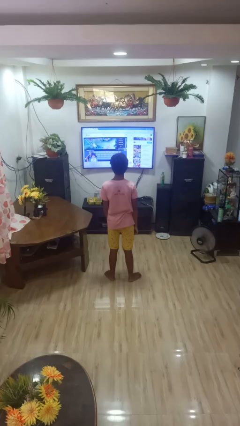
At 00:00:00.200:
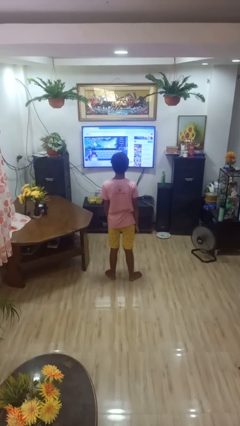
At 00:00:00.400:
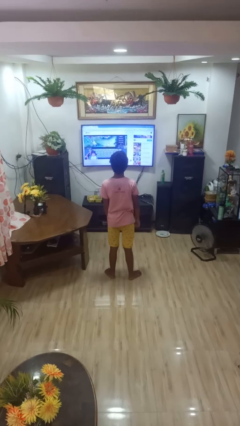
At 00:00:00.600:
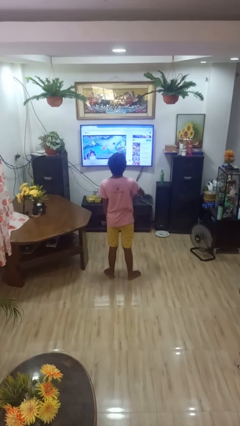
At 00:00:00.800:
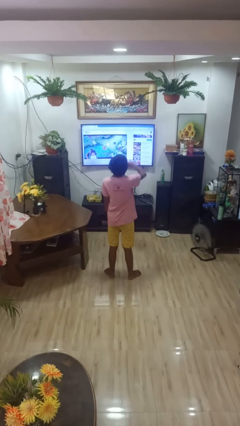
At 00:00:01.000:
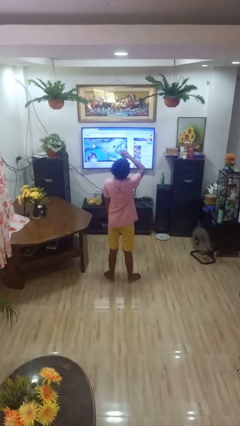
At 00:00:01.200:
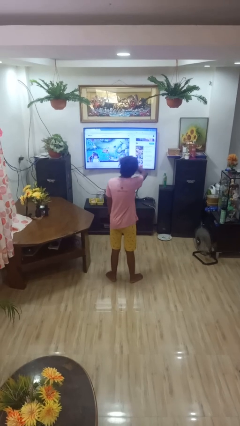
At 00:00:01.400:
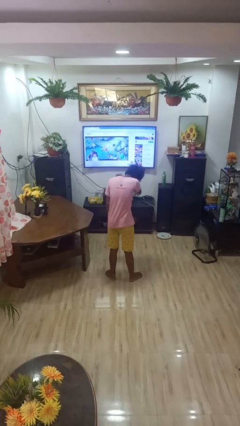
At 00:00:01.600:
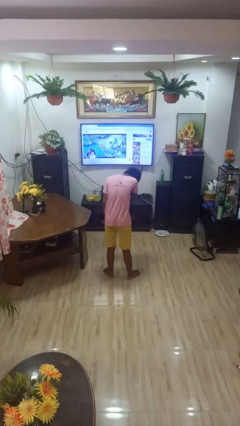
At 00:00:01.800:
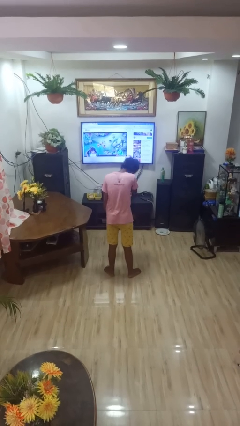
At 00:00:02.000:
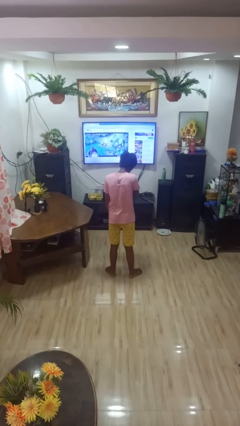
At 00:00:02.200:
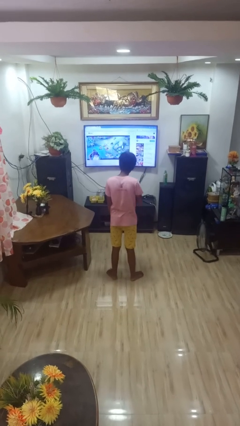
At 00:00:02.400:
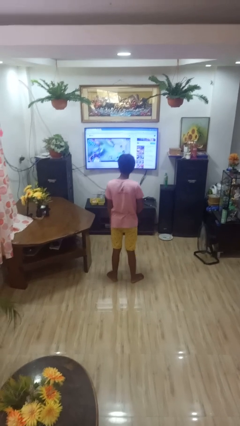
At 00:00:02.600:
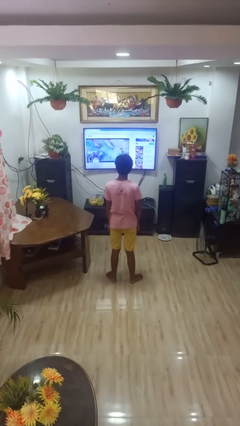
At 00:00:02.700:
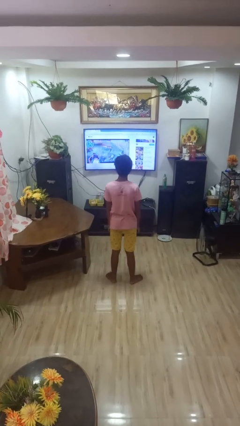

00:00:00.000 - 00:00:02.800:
person sneezes into arm

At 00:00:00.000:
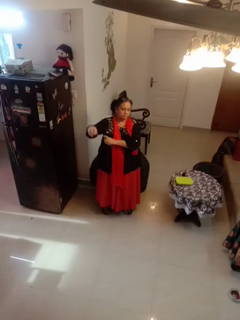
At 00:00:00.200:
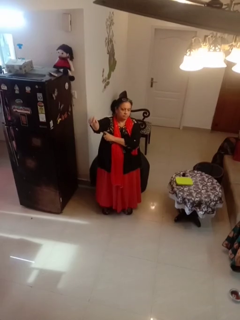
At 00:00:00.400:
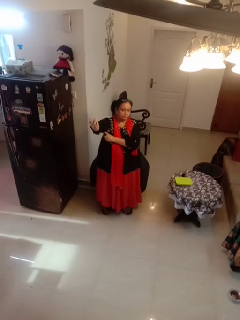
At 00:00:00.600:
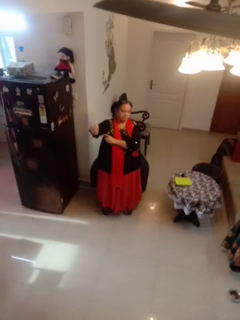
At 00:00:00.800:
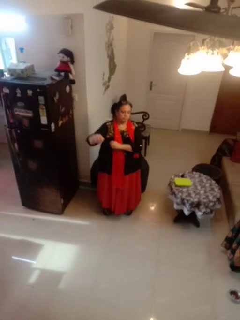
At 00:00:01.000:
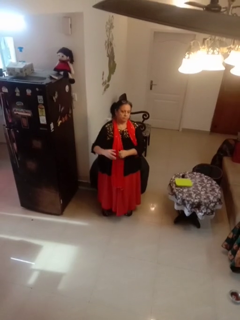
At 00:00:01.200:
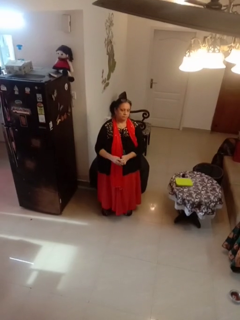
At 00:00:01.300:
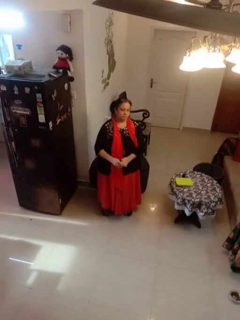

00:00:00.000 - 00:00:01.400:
person applies deodorant

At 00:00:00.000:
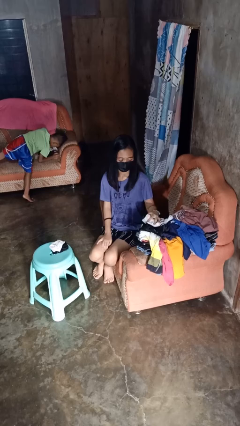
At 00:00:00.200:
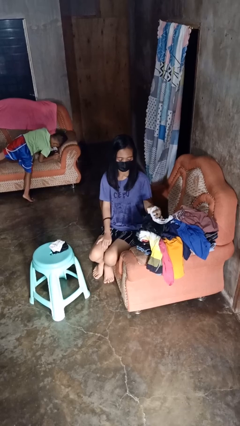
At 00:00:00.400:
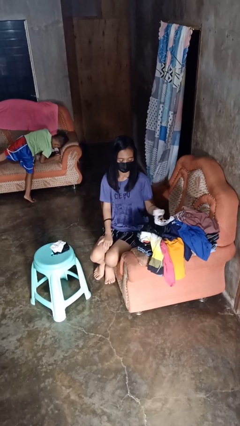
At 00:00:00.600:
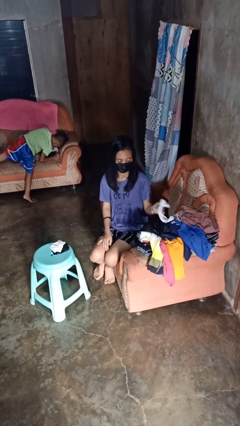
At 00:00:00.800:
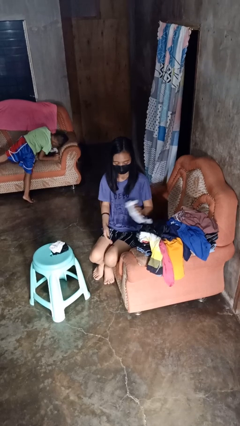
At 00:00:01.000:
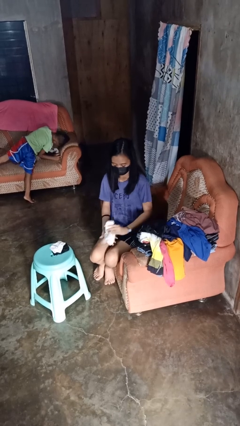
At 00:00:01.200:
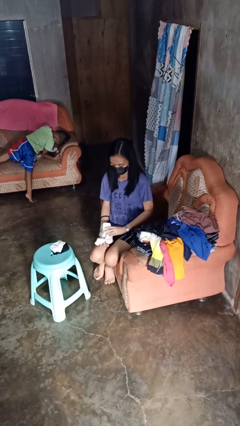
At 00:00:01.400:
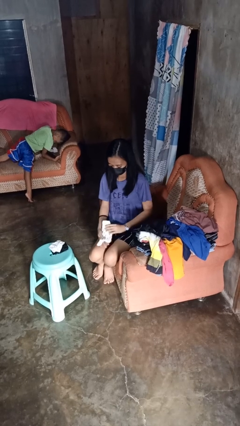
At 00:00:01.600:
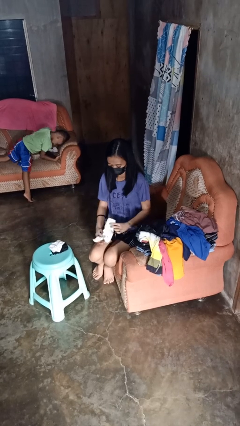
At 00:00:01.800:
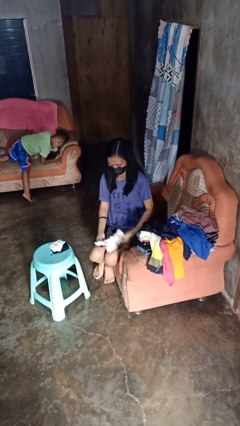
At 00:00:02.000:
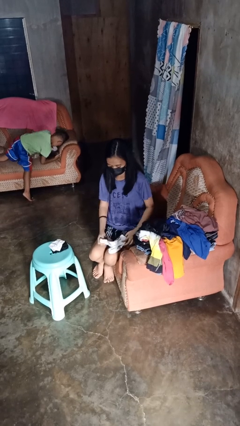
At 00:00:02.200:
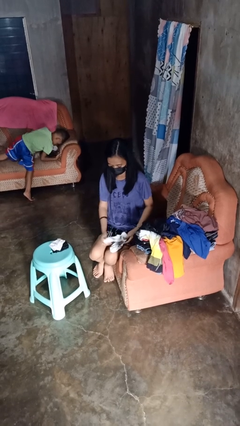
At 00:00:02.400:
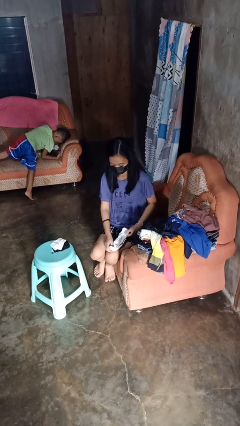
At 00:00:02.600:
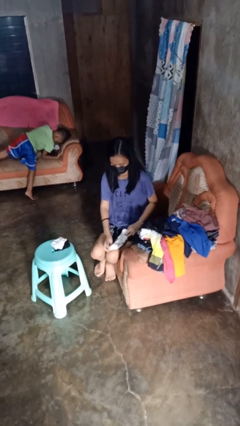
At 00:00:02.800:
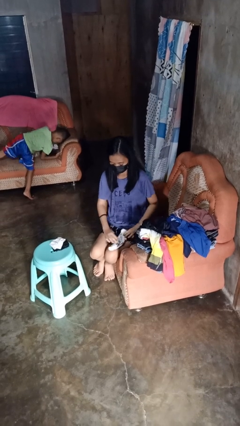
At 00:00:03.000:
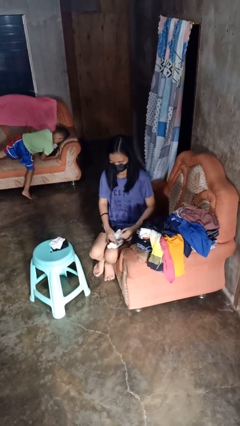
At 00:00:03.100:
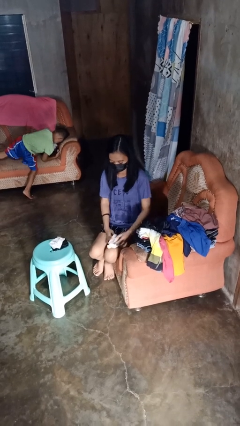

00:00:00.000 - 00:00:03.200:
person folds socks

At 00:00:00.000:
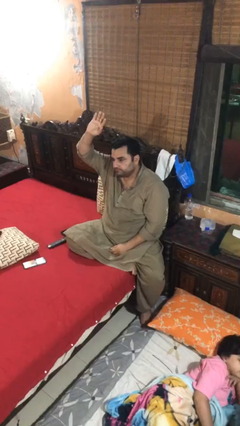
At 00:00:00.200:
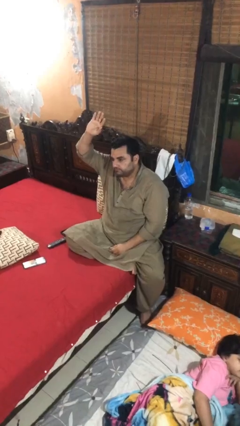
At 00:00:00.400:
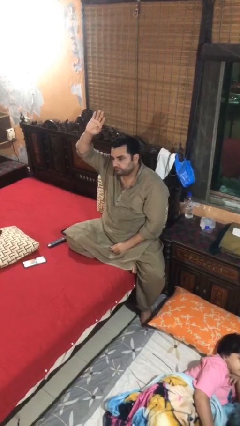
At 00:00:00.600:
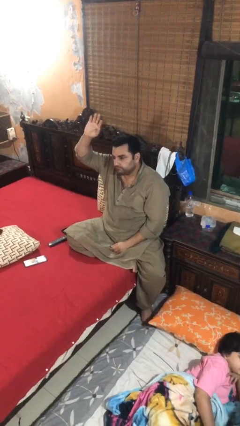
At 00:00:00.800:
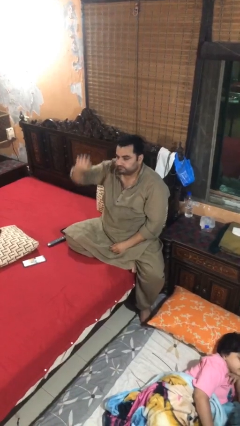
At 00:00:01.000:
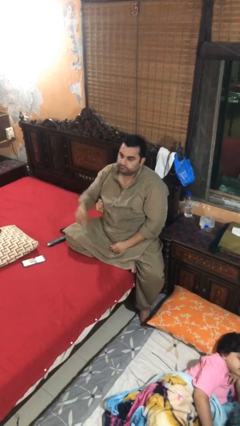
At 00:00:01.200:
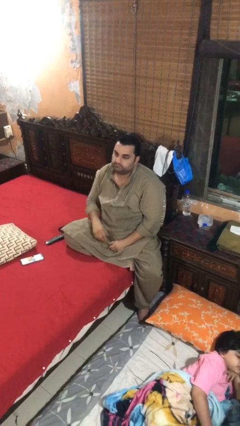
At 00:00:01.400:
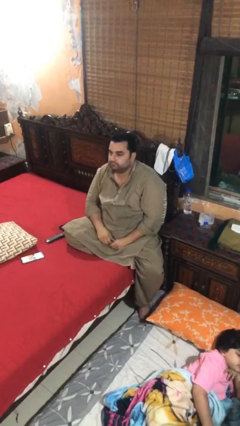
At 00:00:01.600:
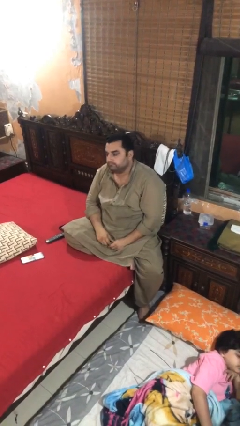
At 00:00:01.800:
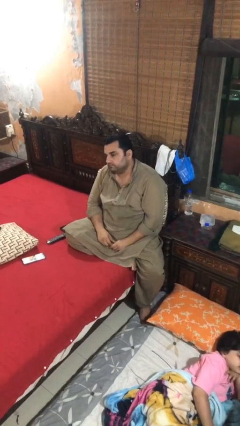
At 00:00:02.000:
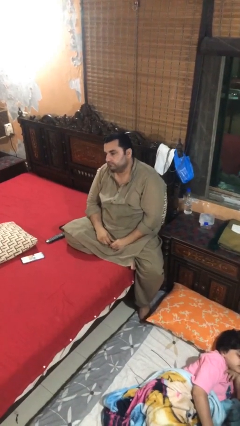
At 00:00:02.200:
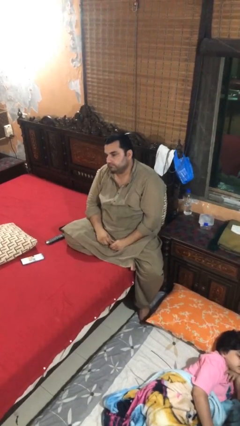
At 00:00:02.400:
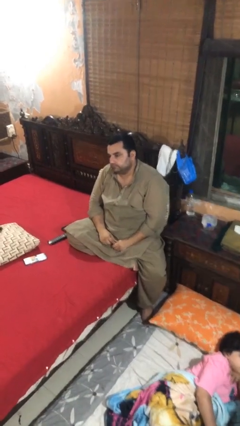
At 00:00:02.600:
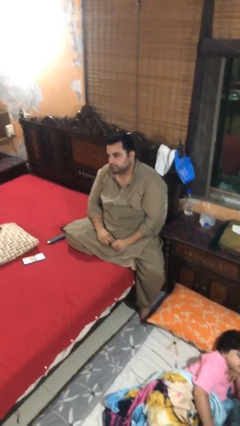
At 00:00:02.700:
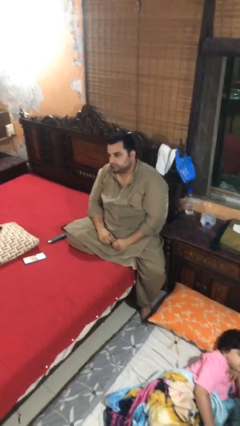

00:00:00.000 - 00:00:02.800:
person gestures lower hand

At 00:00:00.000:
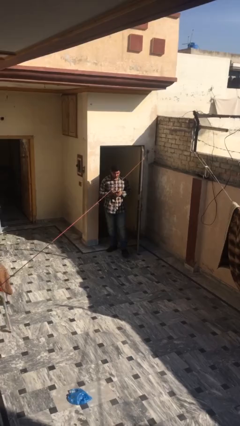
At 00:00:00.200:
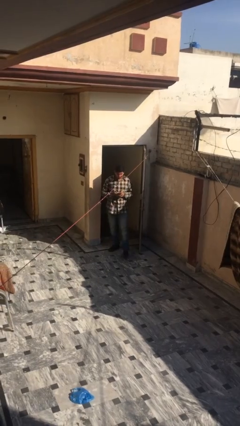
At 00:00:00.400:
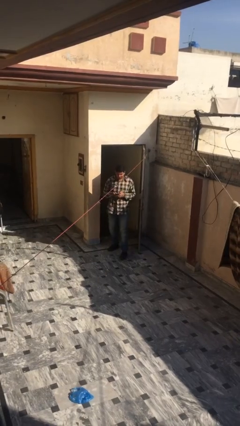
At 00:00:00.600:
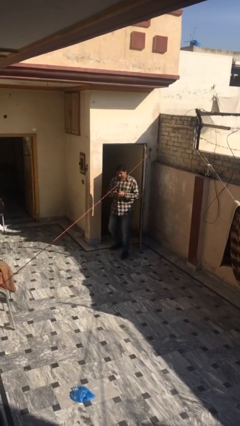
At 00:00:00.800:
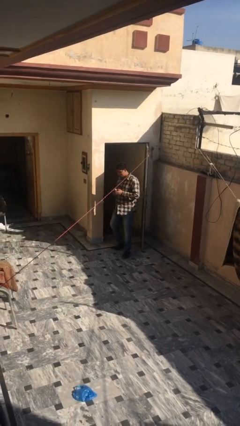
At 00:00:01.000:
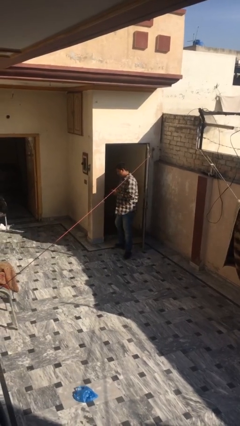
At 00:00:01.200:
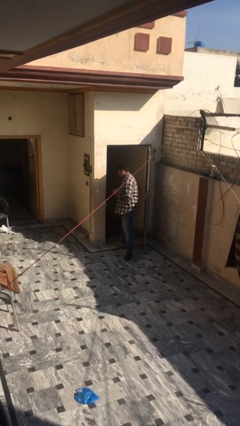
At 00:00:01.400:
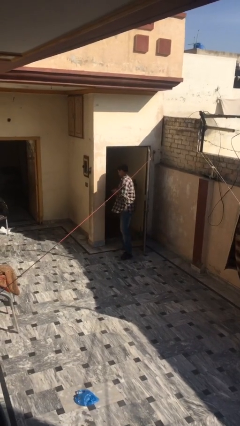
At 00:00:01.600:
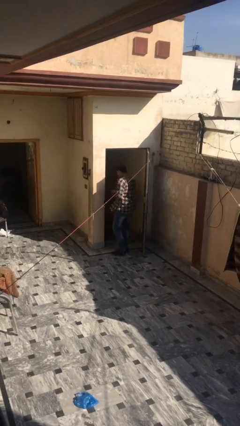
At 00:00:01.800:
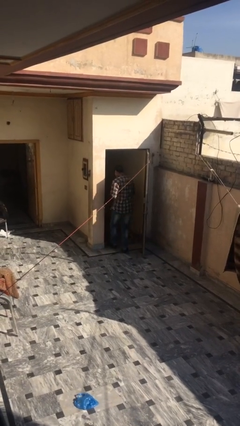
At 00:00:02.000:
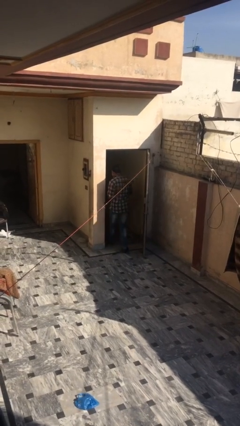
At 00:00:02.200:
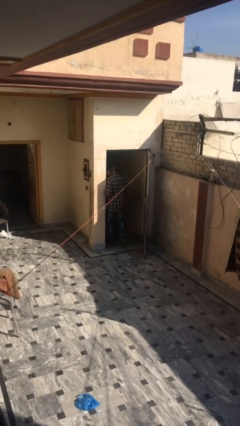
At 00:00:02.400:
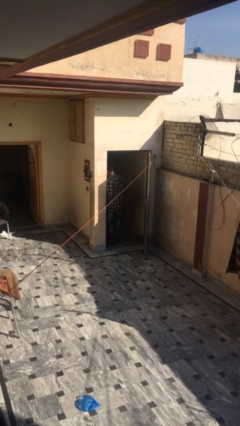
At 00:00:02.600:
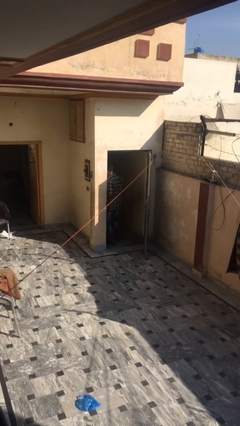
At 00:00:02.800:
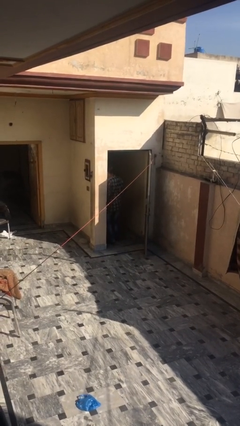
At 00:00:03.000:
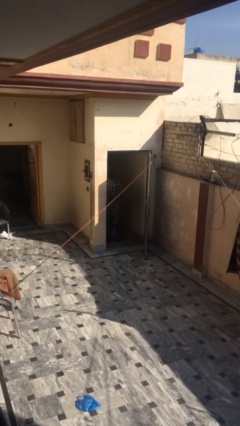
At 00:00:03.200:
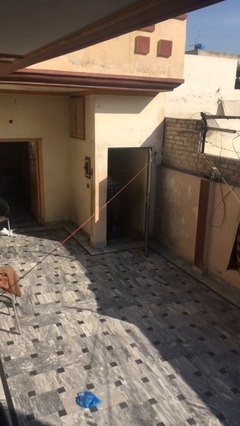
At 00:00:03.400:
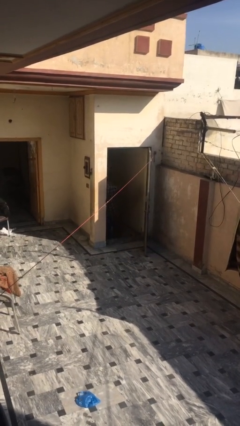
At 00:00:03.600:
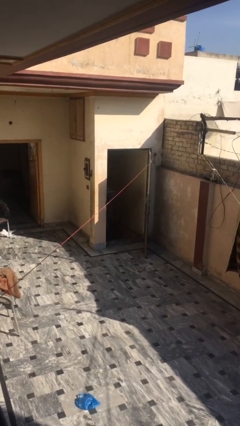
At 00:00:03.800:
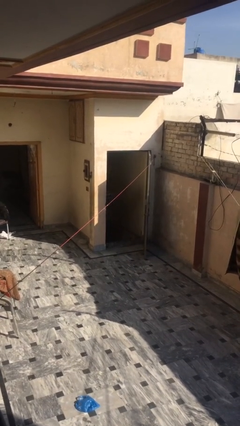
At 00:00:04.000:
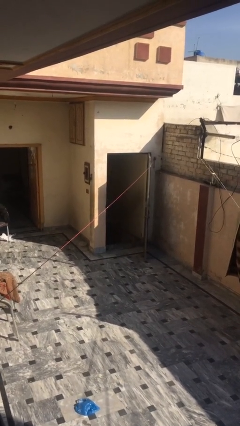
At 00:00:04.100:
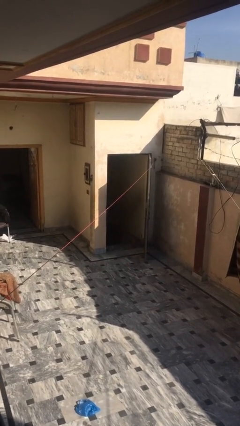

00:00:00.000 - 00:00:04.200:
person exits scene through structure

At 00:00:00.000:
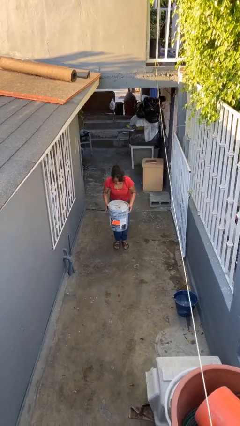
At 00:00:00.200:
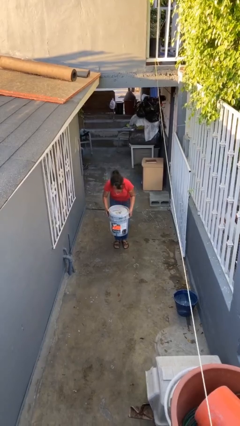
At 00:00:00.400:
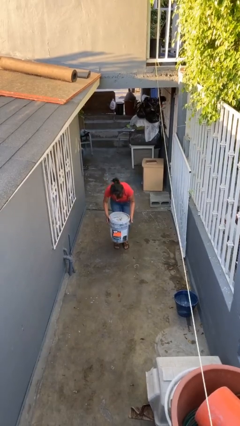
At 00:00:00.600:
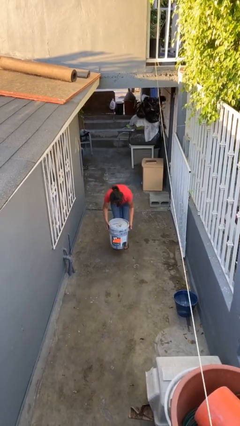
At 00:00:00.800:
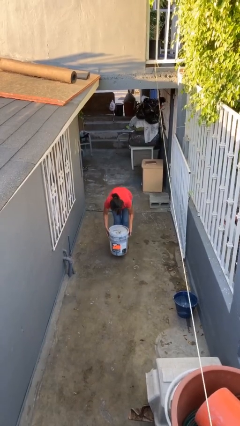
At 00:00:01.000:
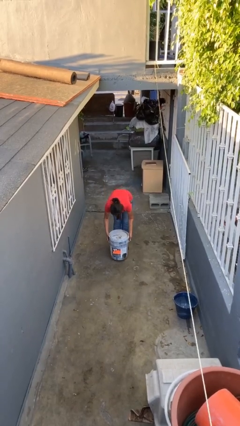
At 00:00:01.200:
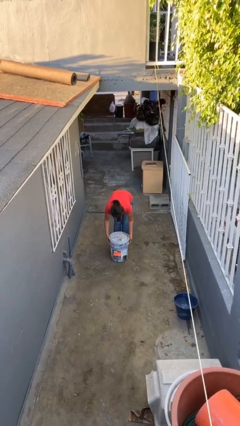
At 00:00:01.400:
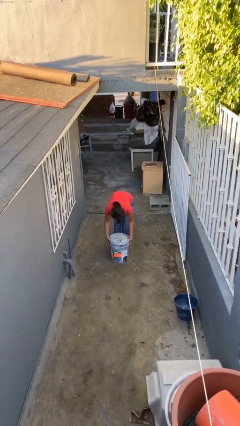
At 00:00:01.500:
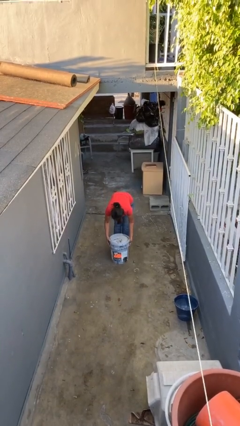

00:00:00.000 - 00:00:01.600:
person puts down object on floor

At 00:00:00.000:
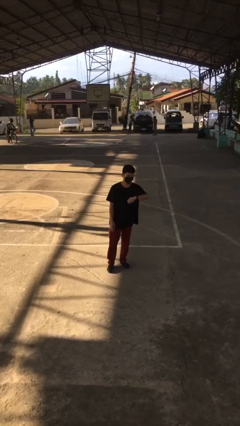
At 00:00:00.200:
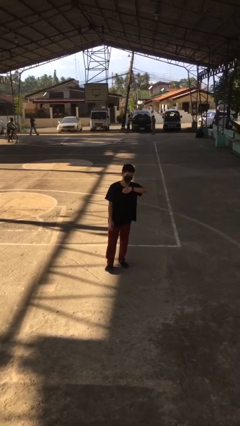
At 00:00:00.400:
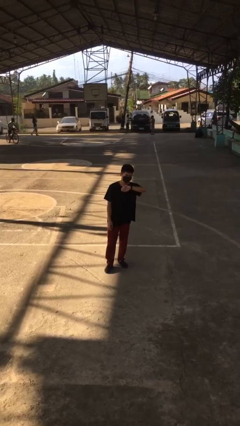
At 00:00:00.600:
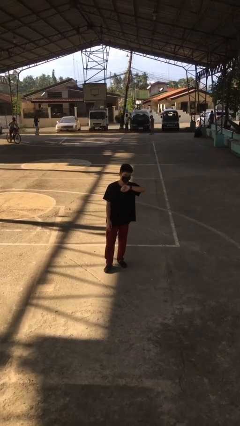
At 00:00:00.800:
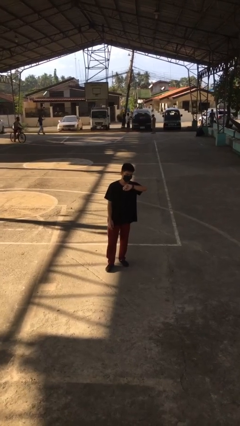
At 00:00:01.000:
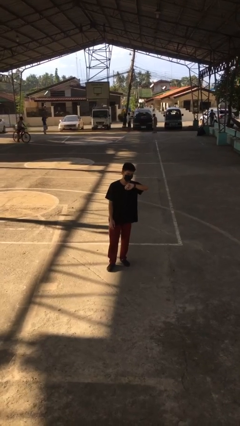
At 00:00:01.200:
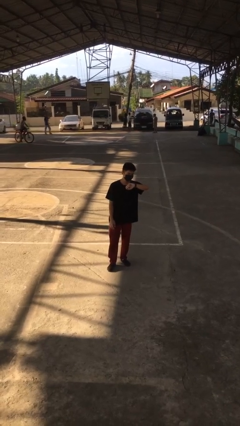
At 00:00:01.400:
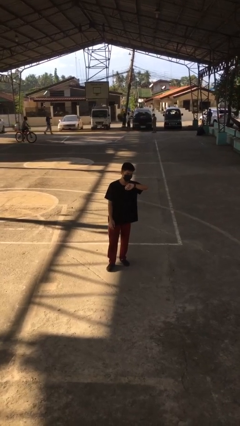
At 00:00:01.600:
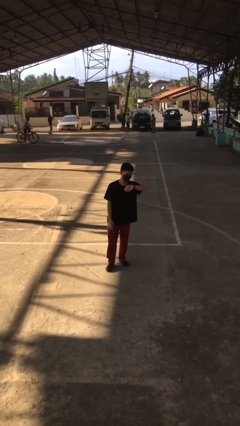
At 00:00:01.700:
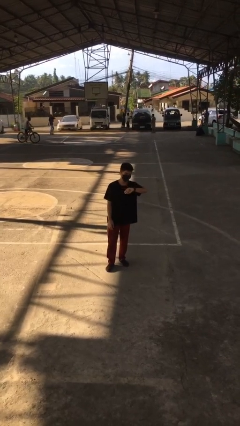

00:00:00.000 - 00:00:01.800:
person looks at wristwatch
